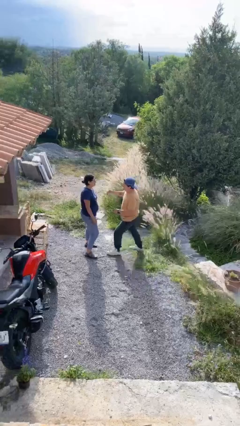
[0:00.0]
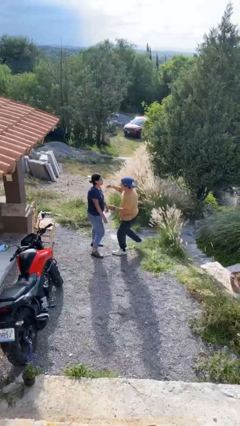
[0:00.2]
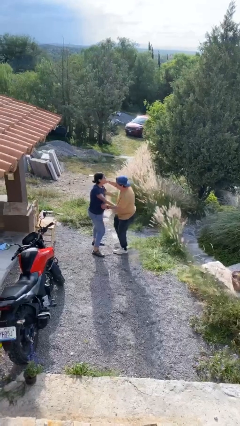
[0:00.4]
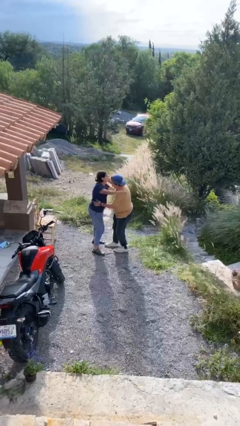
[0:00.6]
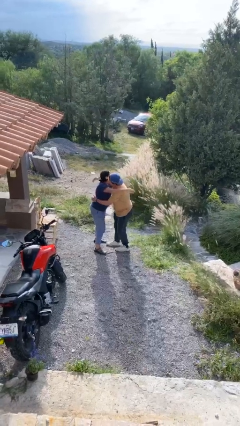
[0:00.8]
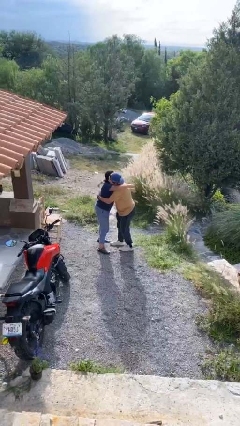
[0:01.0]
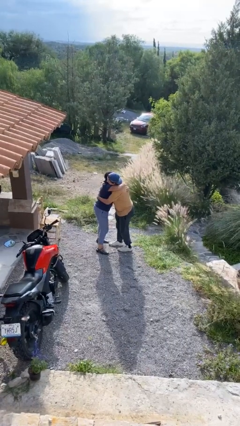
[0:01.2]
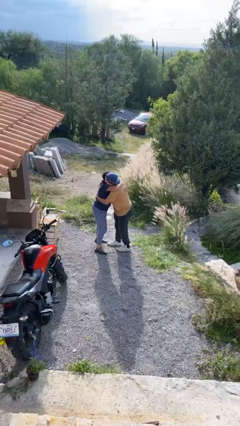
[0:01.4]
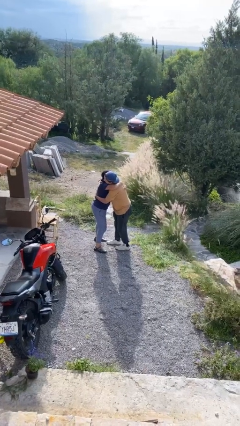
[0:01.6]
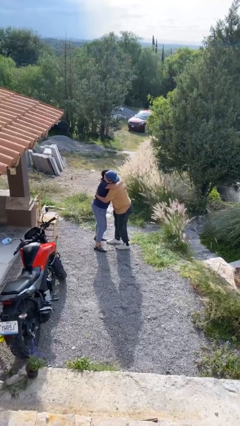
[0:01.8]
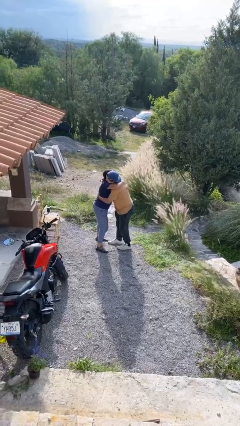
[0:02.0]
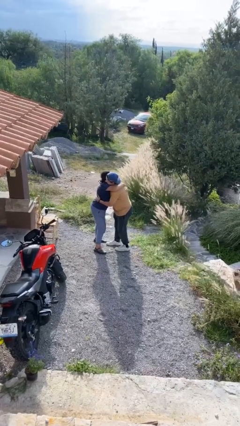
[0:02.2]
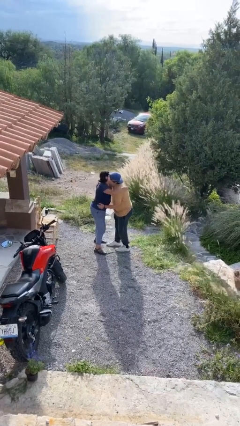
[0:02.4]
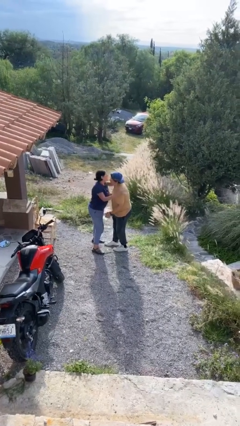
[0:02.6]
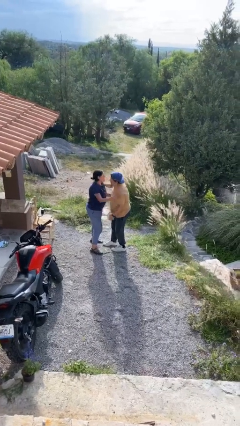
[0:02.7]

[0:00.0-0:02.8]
person embraces person

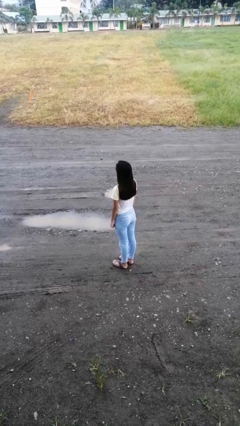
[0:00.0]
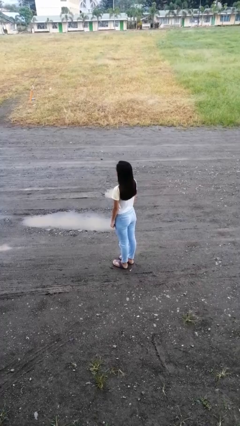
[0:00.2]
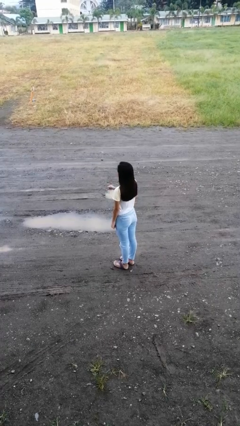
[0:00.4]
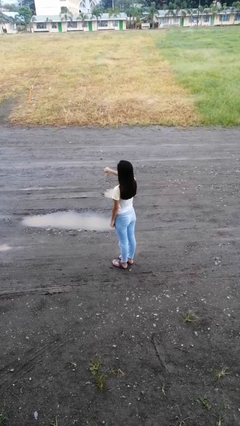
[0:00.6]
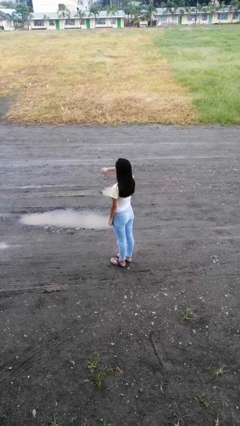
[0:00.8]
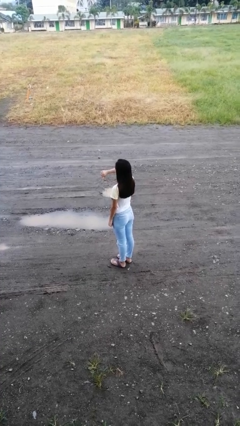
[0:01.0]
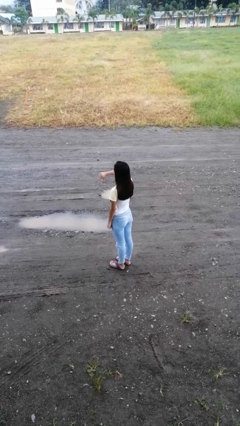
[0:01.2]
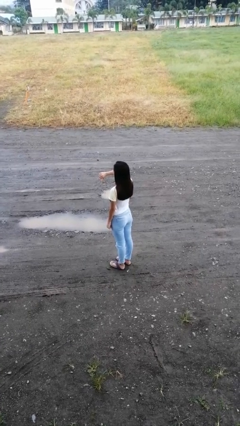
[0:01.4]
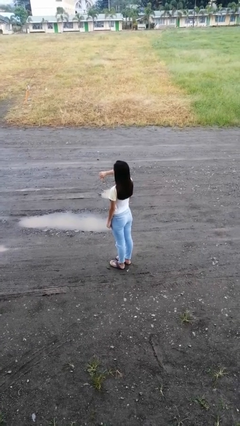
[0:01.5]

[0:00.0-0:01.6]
person gestures thumbs down

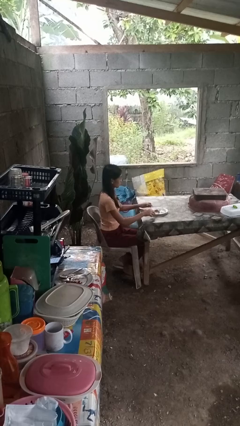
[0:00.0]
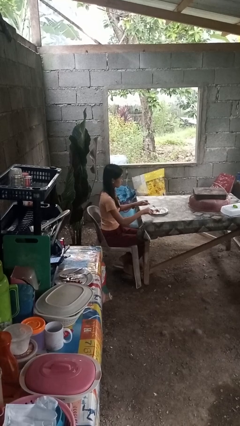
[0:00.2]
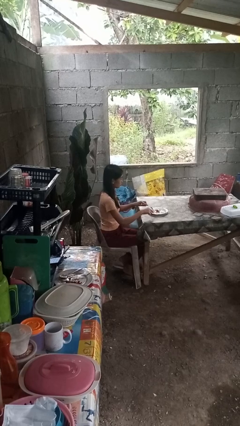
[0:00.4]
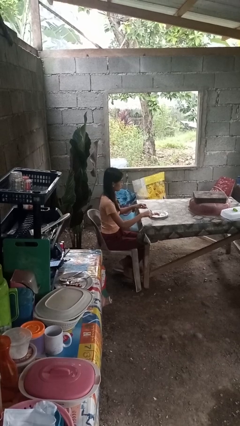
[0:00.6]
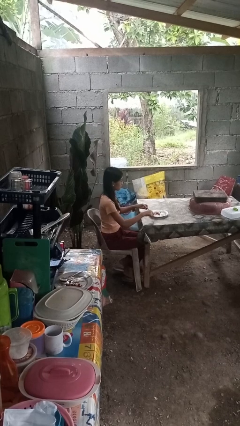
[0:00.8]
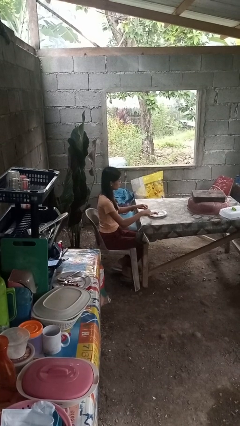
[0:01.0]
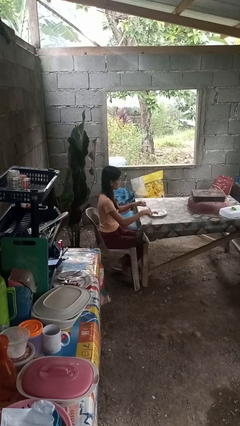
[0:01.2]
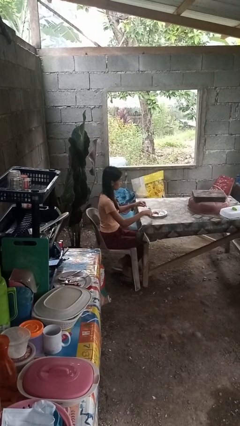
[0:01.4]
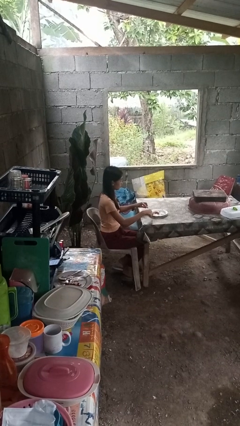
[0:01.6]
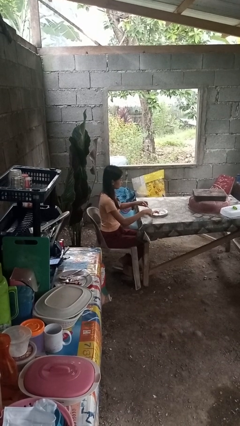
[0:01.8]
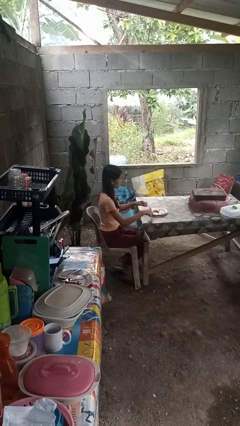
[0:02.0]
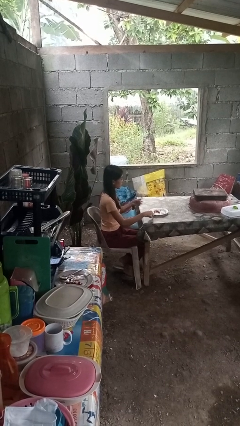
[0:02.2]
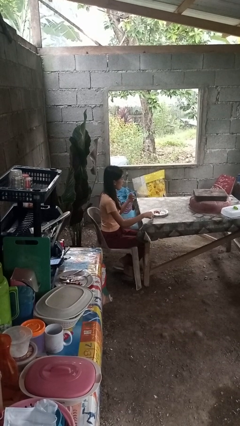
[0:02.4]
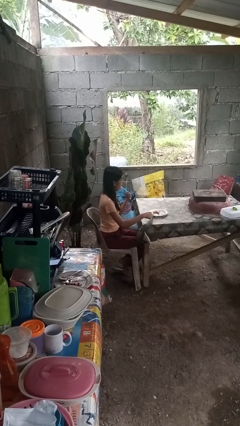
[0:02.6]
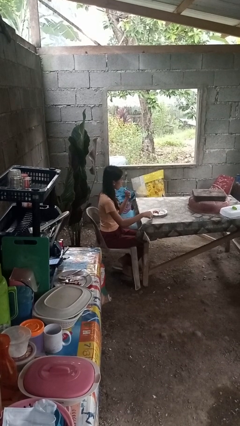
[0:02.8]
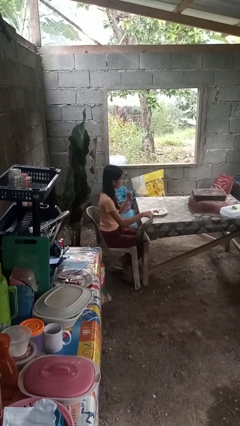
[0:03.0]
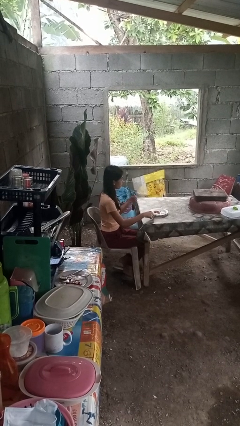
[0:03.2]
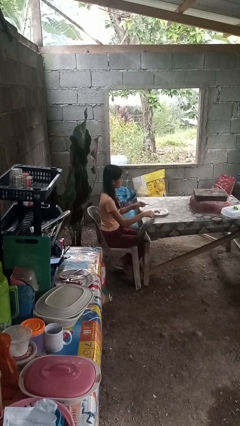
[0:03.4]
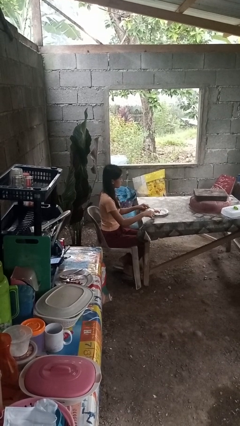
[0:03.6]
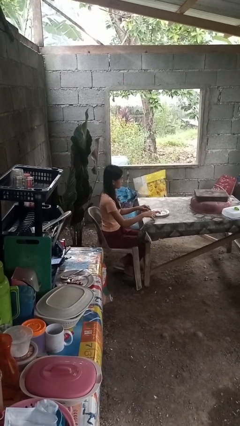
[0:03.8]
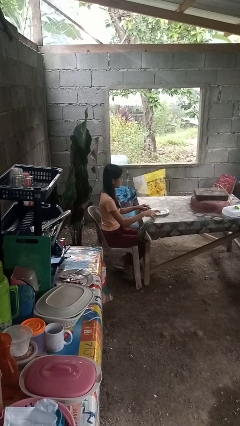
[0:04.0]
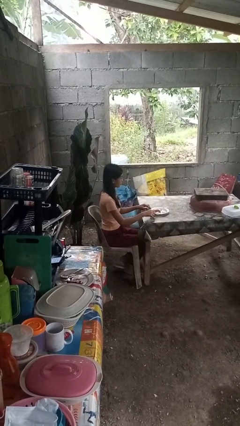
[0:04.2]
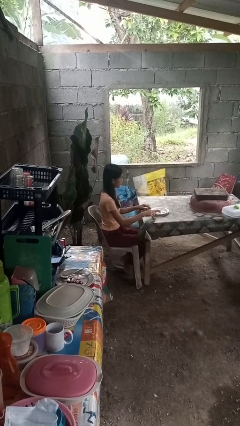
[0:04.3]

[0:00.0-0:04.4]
person eats with utensil

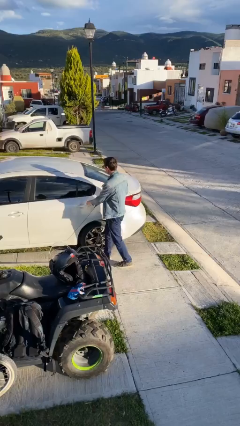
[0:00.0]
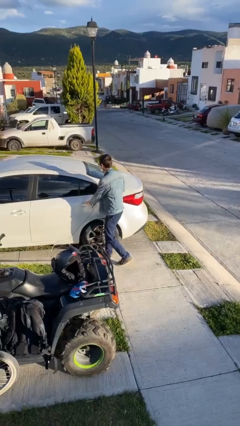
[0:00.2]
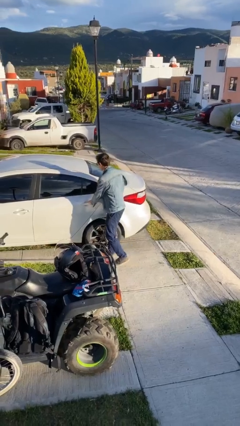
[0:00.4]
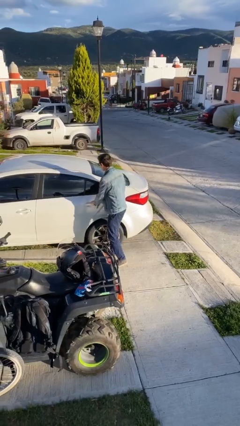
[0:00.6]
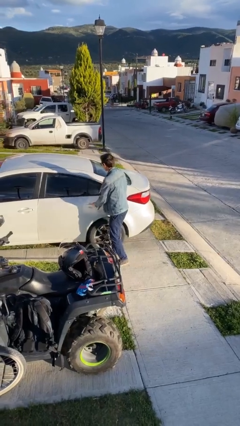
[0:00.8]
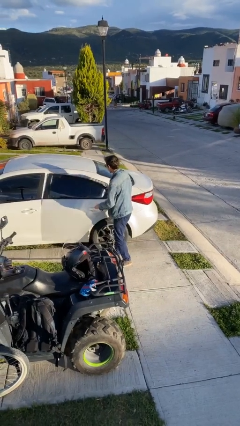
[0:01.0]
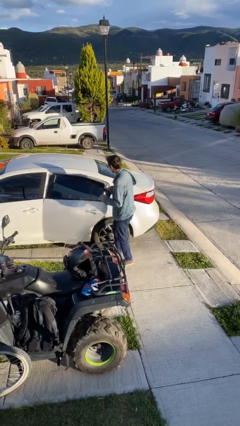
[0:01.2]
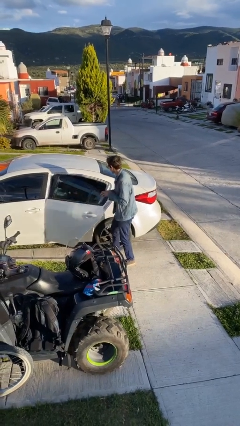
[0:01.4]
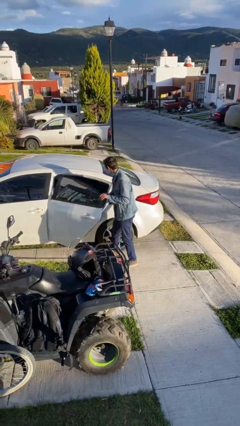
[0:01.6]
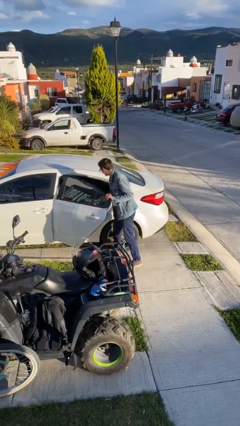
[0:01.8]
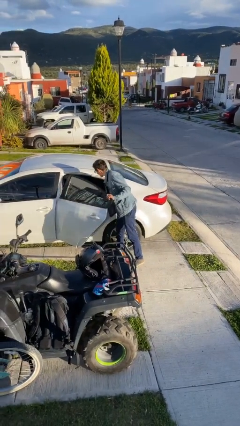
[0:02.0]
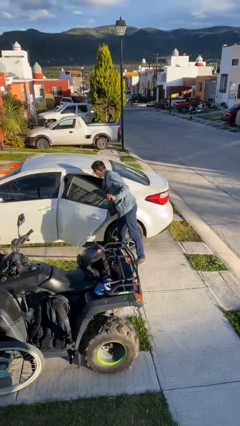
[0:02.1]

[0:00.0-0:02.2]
person opens car door

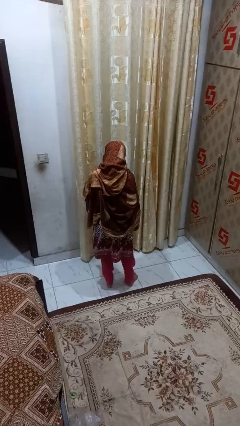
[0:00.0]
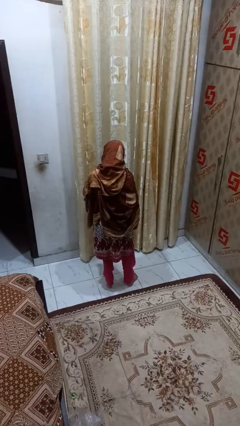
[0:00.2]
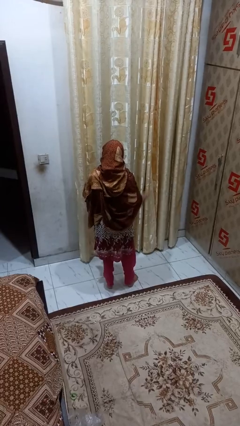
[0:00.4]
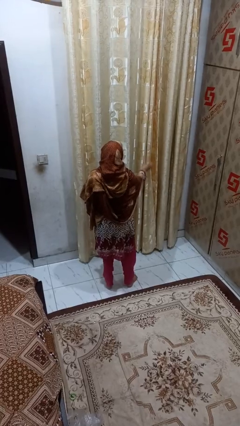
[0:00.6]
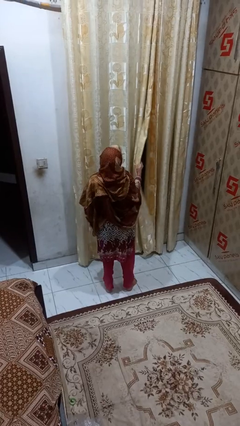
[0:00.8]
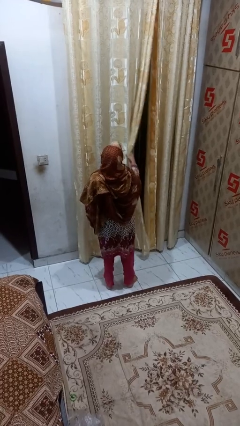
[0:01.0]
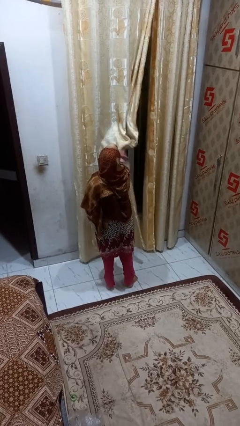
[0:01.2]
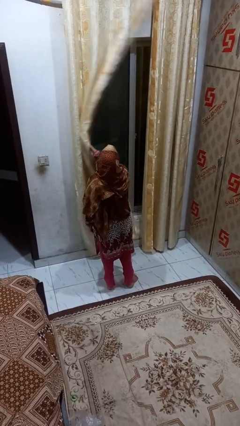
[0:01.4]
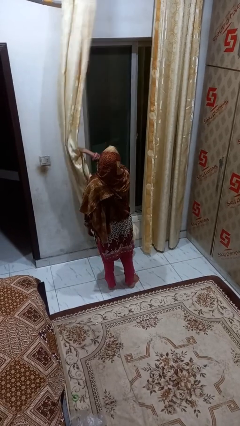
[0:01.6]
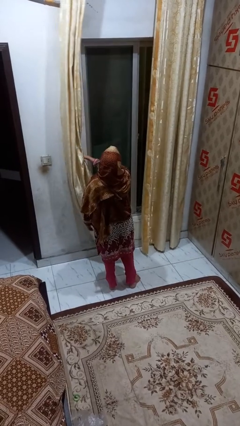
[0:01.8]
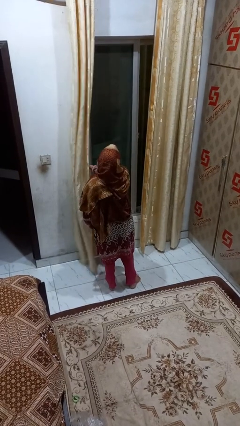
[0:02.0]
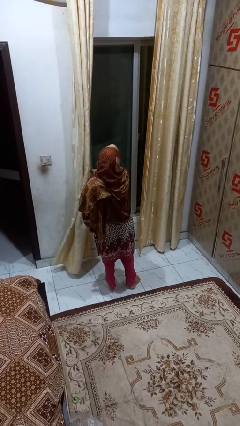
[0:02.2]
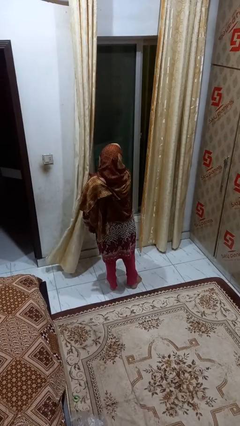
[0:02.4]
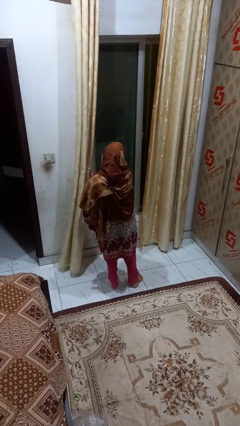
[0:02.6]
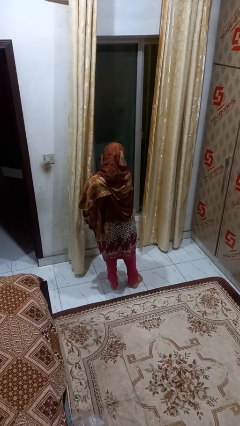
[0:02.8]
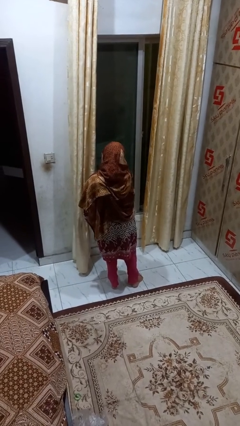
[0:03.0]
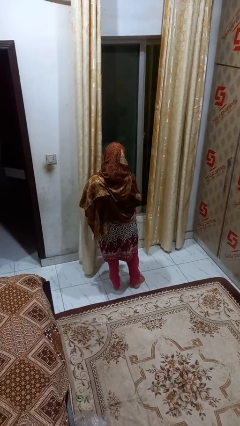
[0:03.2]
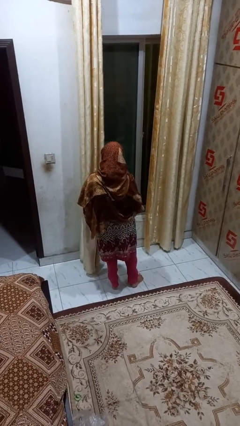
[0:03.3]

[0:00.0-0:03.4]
person opens curtains

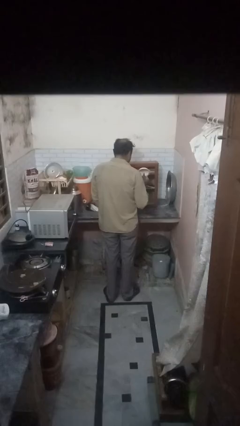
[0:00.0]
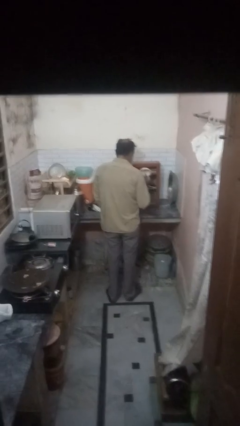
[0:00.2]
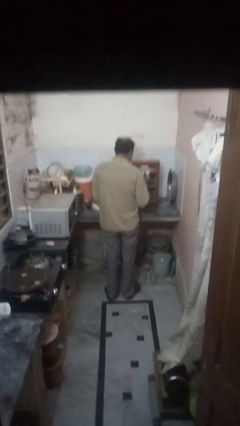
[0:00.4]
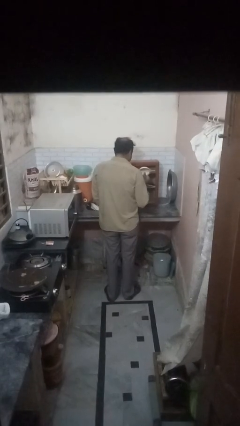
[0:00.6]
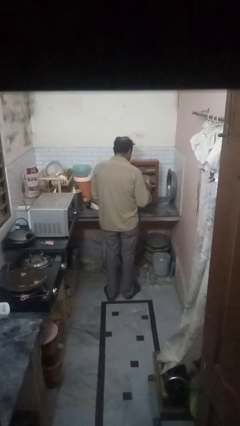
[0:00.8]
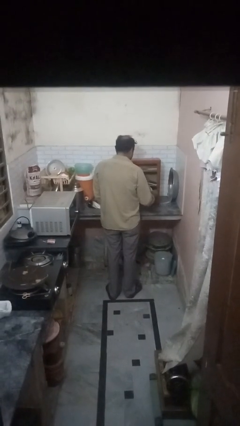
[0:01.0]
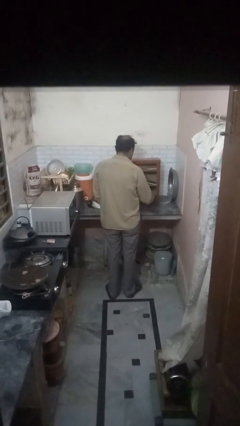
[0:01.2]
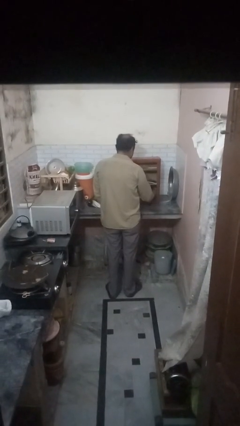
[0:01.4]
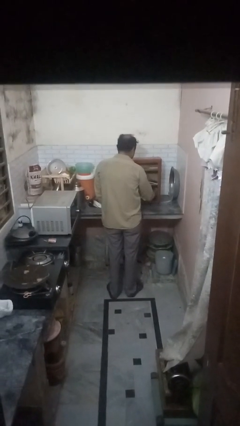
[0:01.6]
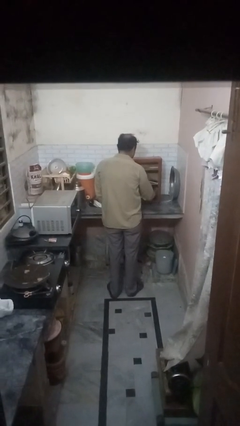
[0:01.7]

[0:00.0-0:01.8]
person takes object from cabinet

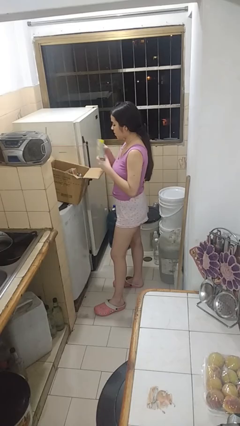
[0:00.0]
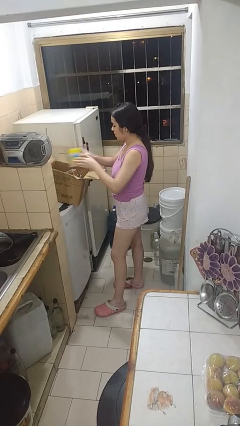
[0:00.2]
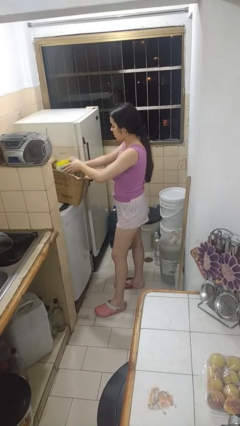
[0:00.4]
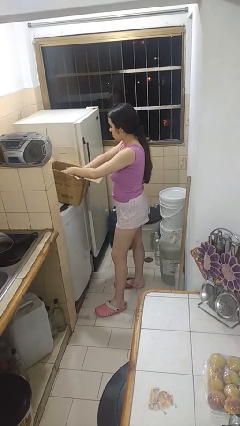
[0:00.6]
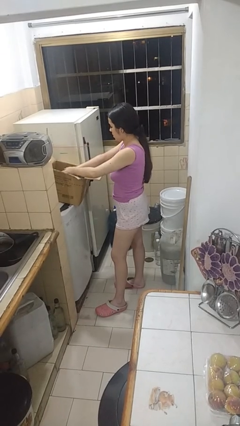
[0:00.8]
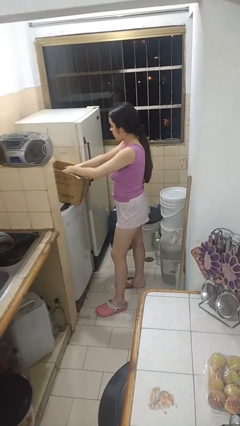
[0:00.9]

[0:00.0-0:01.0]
person puts object into box
